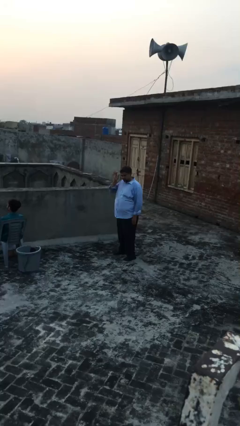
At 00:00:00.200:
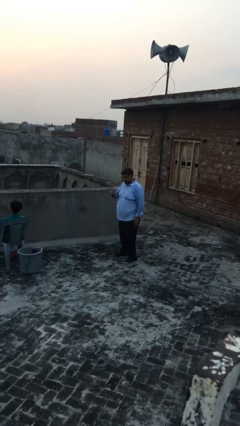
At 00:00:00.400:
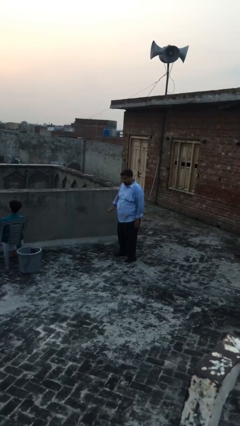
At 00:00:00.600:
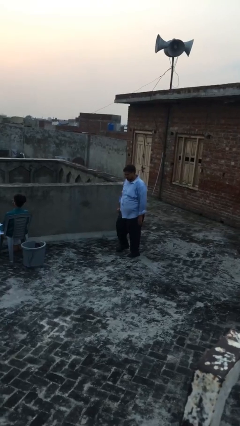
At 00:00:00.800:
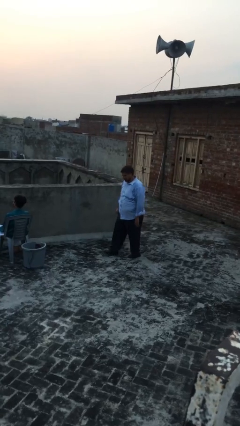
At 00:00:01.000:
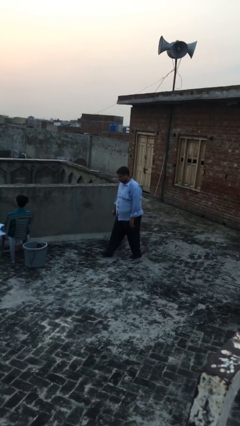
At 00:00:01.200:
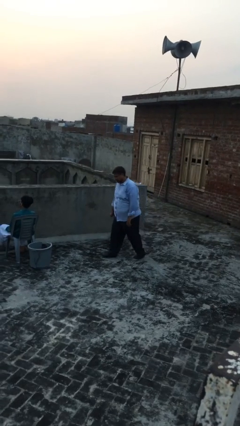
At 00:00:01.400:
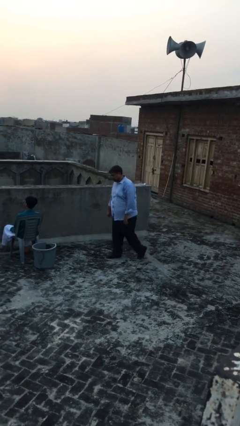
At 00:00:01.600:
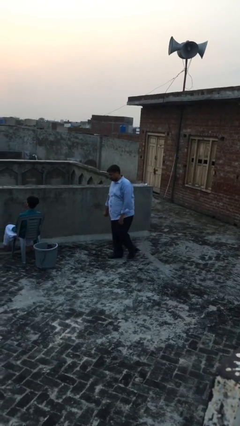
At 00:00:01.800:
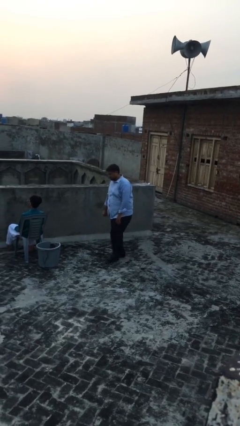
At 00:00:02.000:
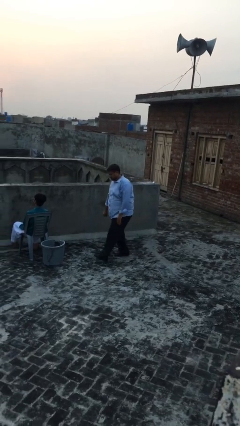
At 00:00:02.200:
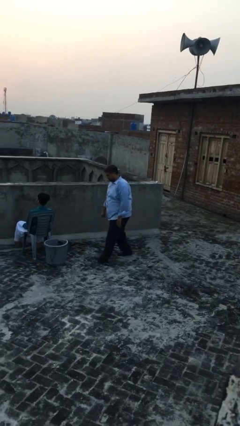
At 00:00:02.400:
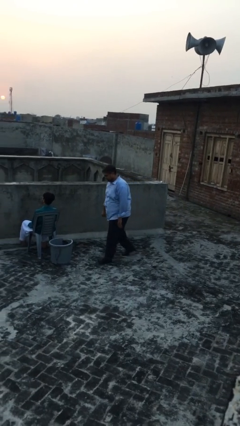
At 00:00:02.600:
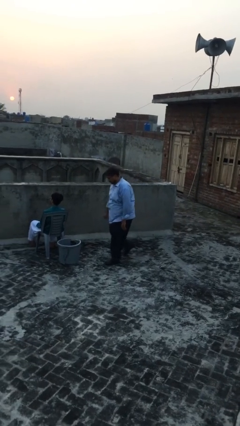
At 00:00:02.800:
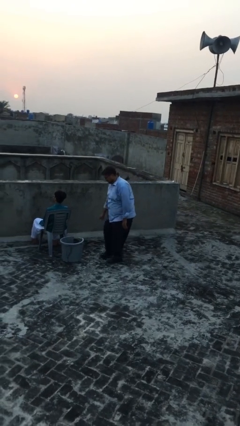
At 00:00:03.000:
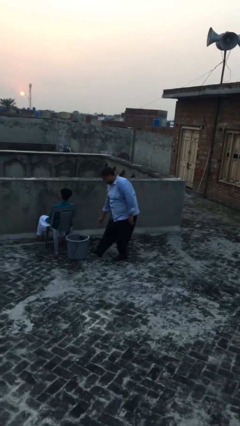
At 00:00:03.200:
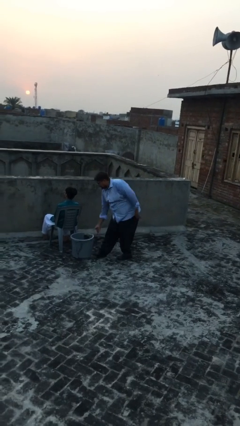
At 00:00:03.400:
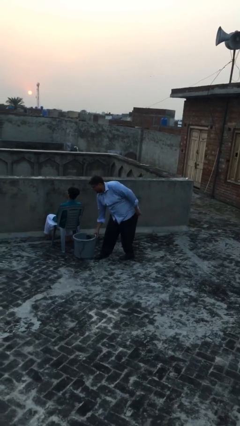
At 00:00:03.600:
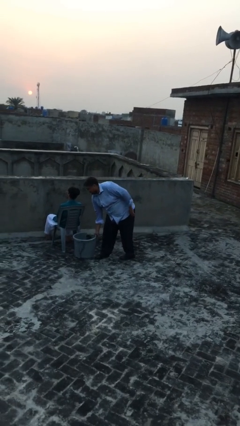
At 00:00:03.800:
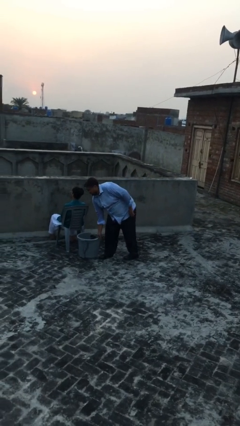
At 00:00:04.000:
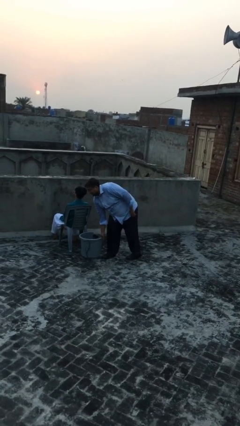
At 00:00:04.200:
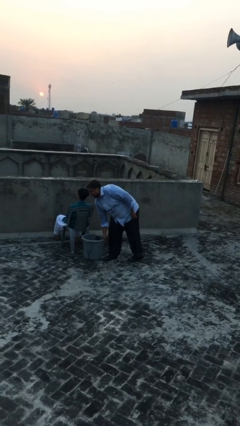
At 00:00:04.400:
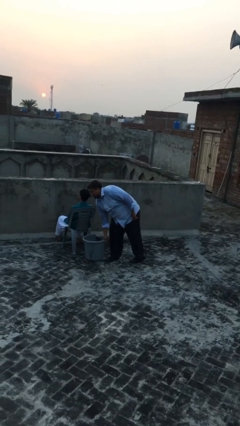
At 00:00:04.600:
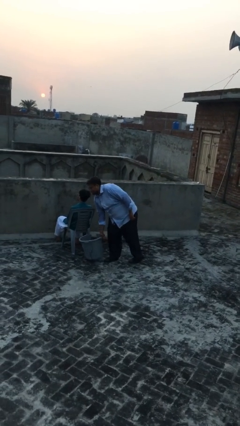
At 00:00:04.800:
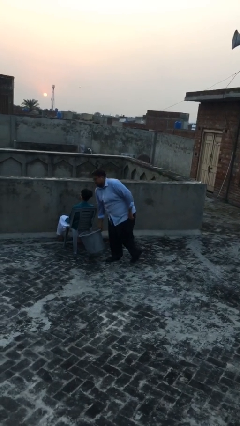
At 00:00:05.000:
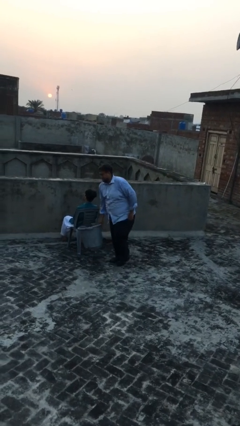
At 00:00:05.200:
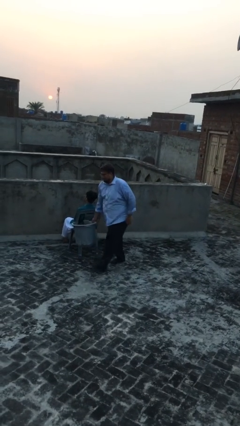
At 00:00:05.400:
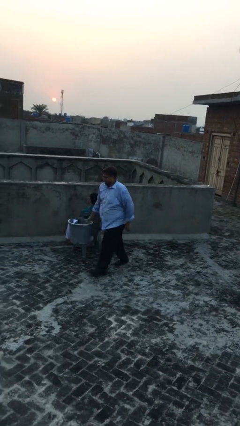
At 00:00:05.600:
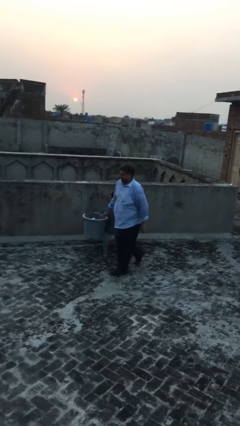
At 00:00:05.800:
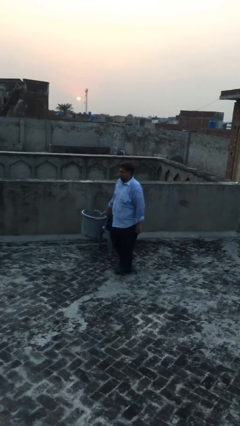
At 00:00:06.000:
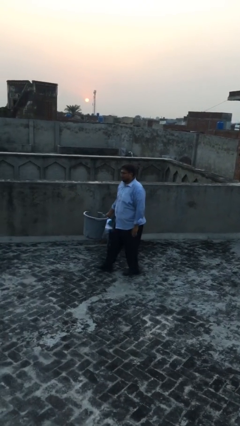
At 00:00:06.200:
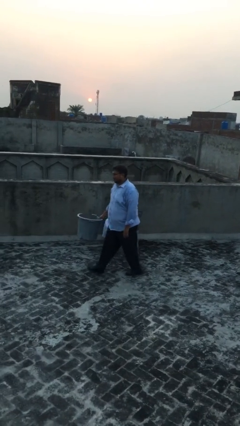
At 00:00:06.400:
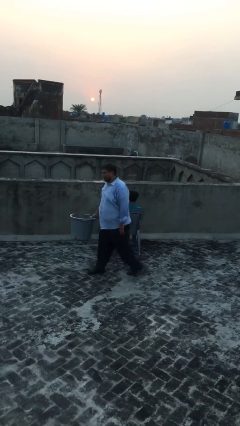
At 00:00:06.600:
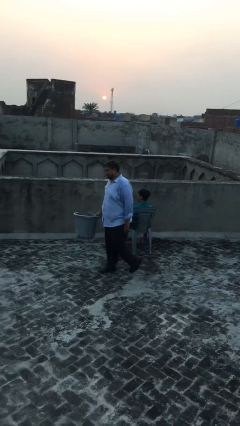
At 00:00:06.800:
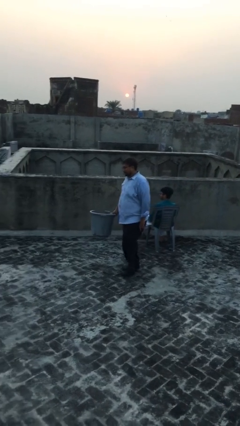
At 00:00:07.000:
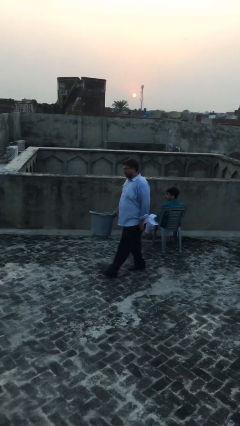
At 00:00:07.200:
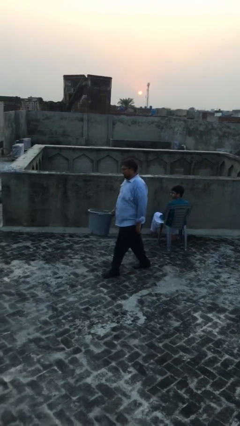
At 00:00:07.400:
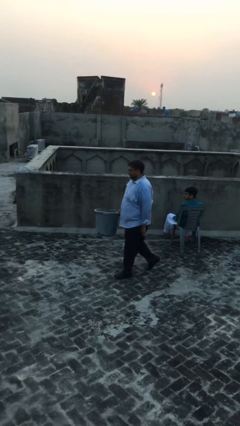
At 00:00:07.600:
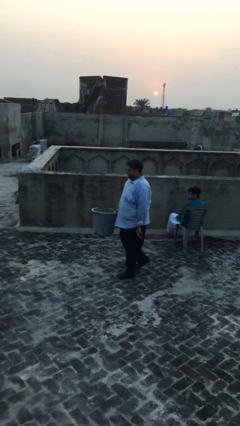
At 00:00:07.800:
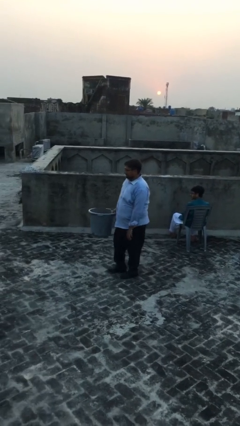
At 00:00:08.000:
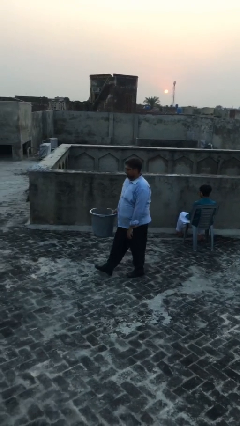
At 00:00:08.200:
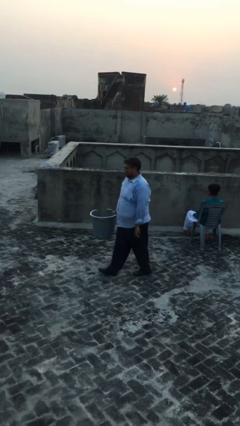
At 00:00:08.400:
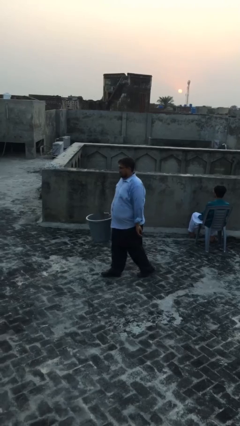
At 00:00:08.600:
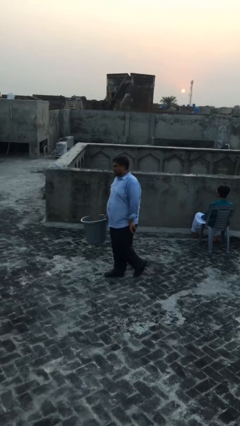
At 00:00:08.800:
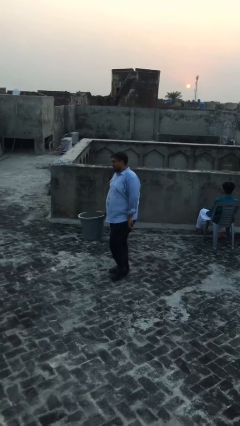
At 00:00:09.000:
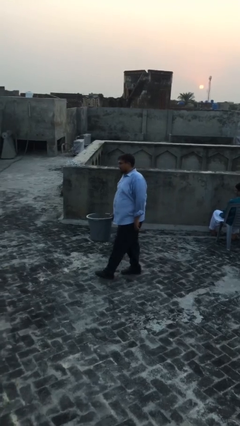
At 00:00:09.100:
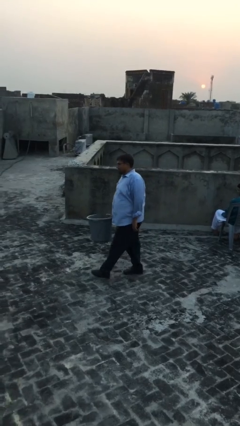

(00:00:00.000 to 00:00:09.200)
person steals object from person

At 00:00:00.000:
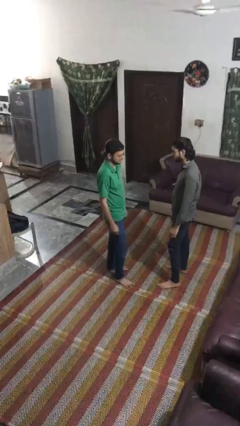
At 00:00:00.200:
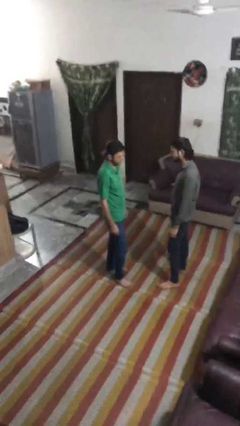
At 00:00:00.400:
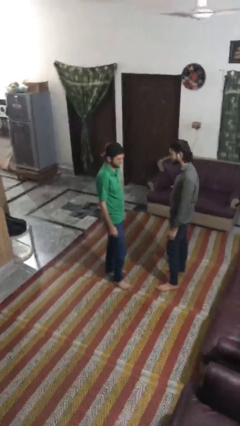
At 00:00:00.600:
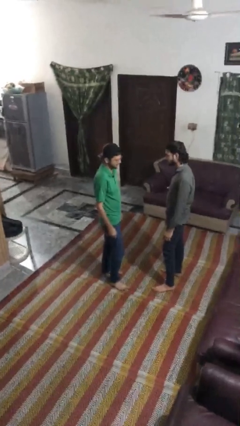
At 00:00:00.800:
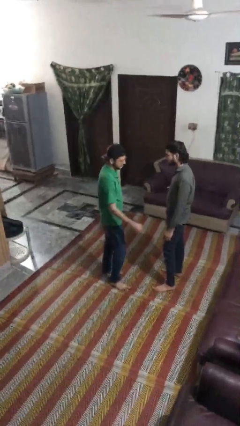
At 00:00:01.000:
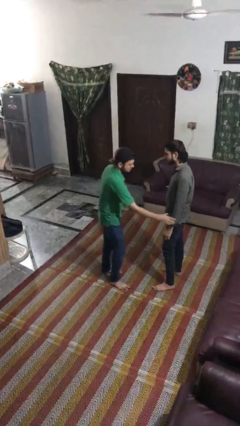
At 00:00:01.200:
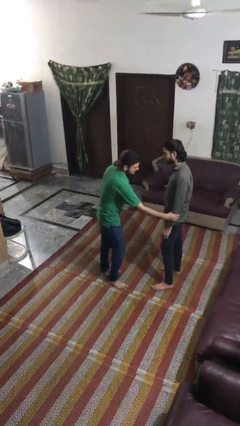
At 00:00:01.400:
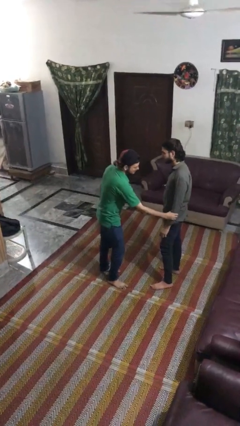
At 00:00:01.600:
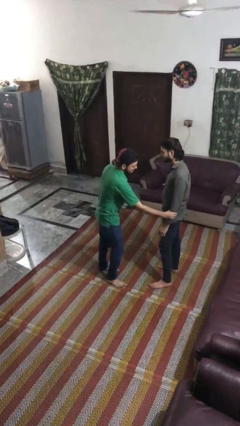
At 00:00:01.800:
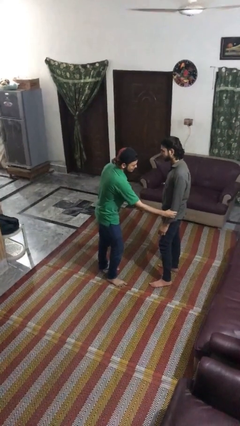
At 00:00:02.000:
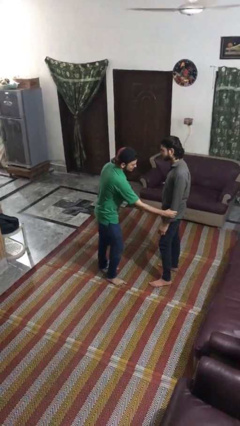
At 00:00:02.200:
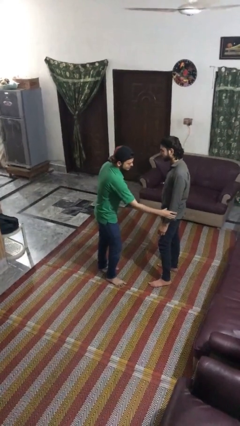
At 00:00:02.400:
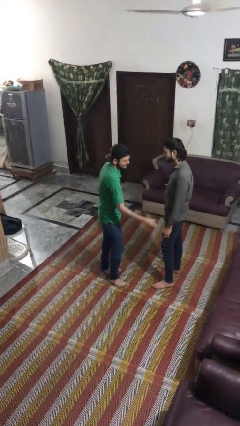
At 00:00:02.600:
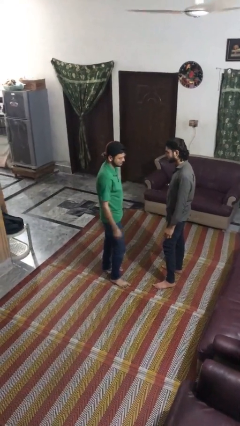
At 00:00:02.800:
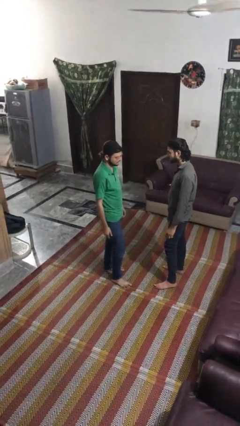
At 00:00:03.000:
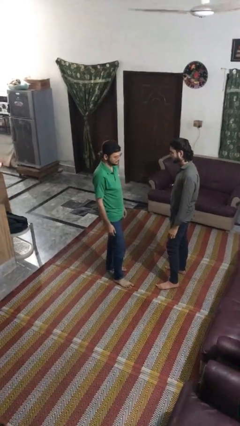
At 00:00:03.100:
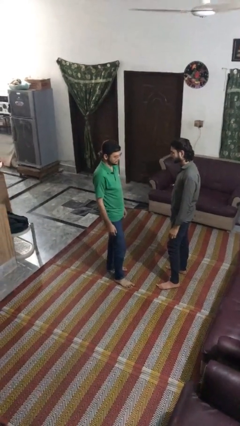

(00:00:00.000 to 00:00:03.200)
person grabs person by forearm

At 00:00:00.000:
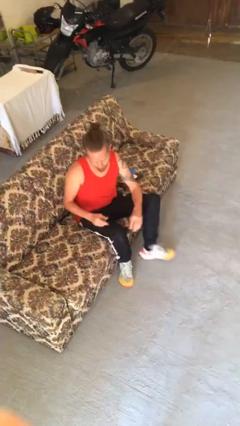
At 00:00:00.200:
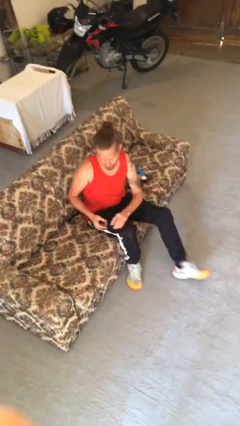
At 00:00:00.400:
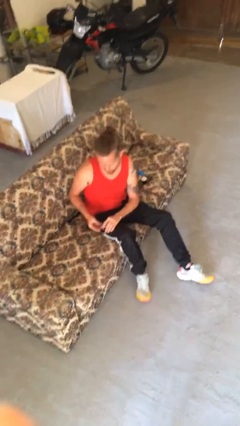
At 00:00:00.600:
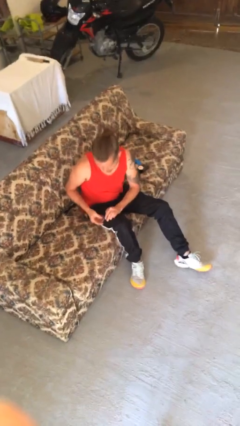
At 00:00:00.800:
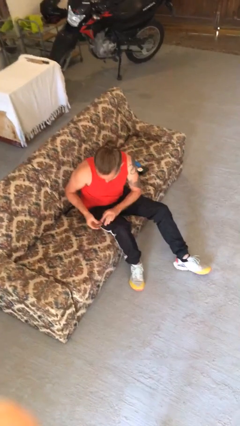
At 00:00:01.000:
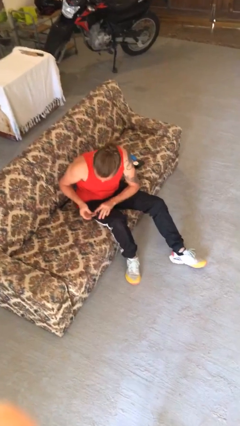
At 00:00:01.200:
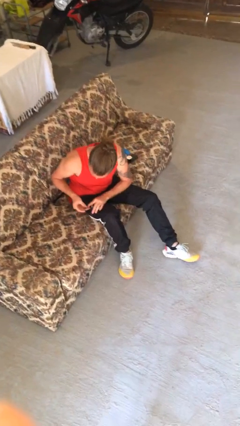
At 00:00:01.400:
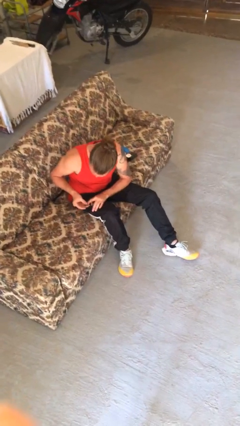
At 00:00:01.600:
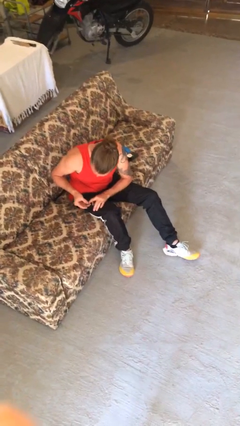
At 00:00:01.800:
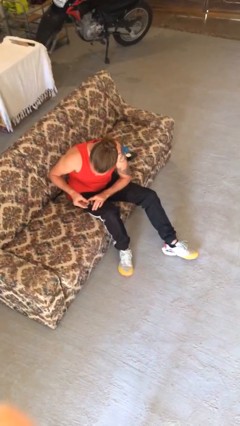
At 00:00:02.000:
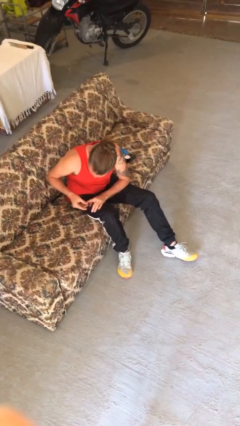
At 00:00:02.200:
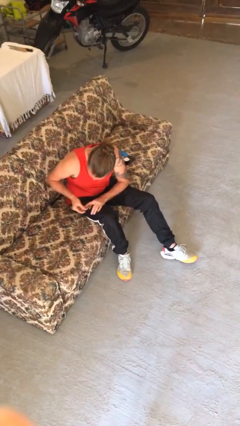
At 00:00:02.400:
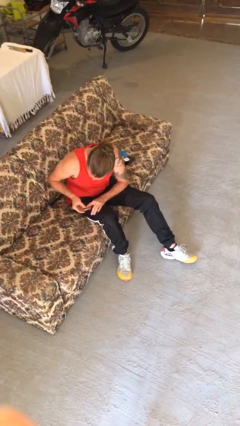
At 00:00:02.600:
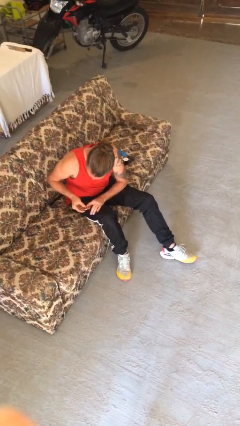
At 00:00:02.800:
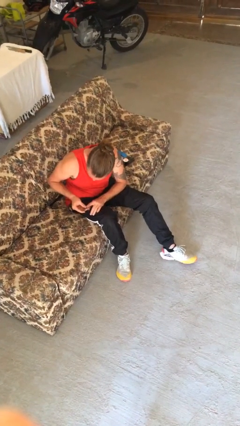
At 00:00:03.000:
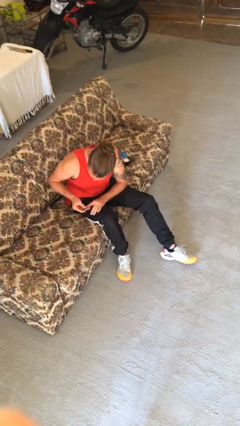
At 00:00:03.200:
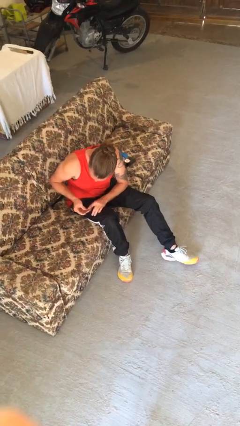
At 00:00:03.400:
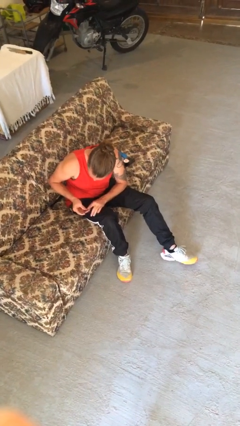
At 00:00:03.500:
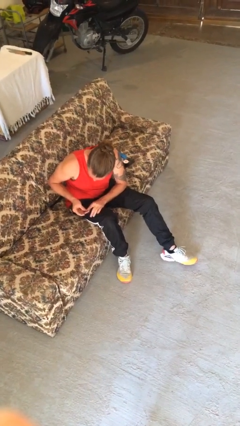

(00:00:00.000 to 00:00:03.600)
person clips fingernails

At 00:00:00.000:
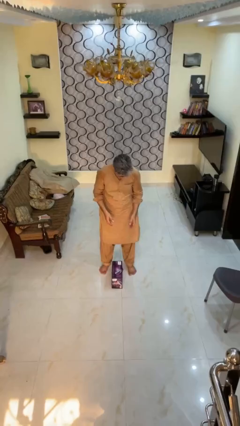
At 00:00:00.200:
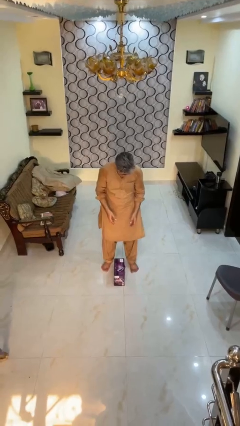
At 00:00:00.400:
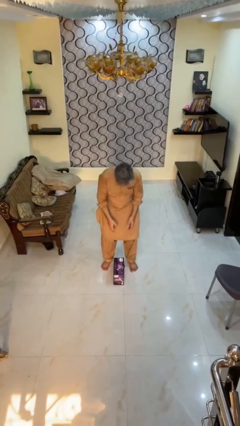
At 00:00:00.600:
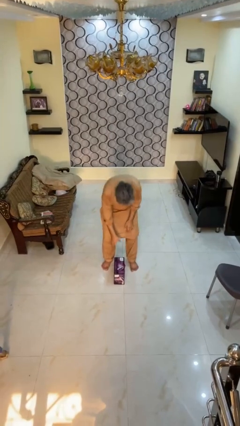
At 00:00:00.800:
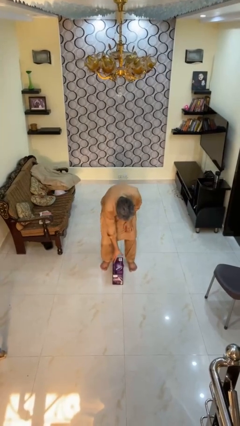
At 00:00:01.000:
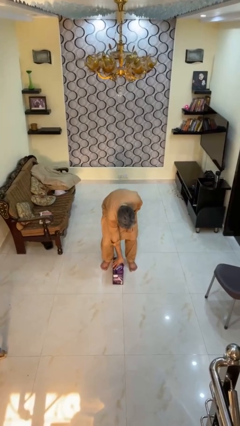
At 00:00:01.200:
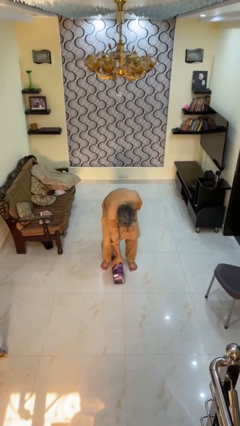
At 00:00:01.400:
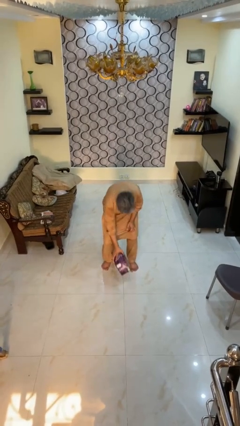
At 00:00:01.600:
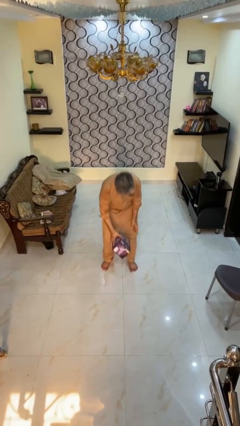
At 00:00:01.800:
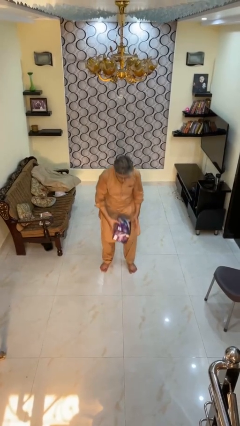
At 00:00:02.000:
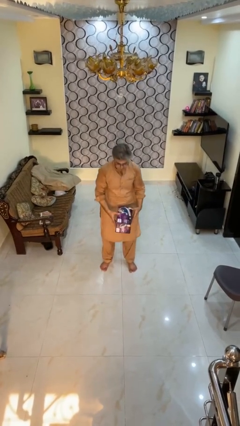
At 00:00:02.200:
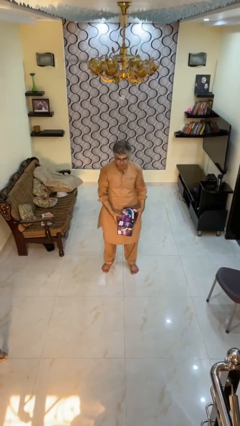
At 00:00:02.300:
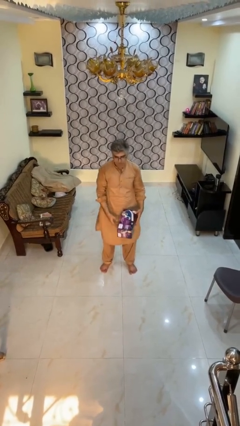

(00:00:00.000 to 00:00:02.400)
person picks up object from floor
